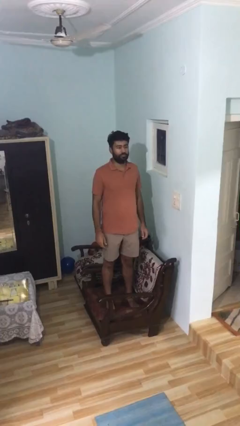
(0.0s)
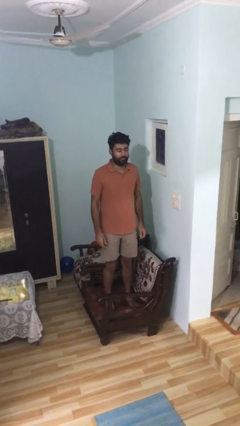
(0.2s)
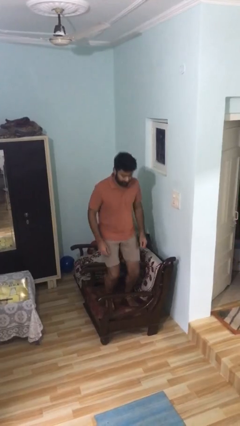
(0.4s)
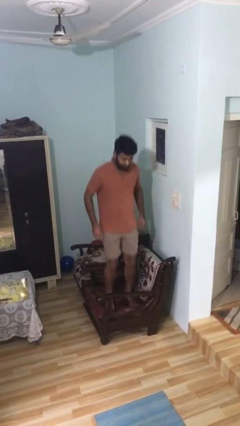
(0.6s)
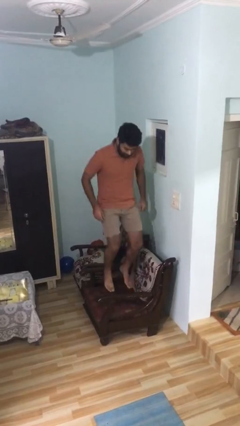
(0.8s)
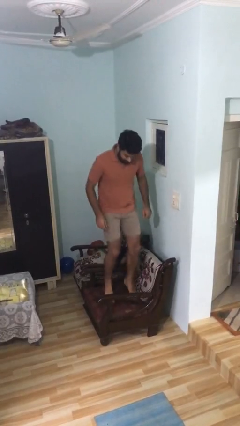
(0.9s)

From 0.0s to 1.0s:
person jumps on couch

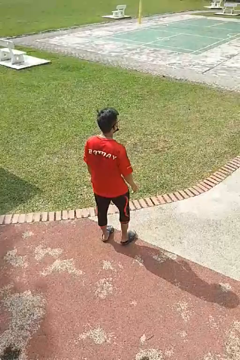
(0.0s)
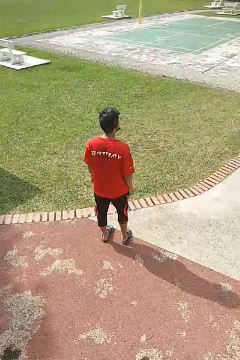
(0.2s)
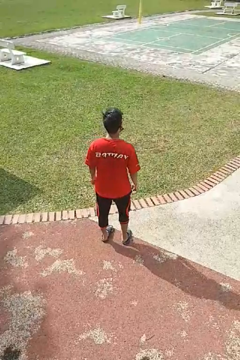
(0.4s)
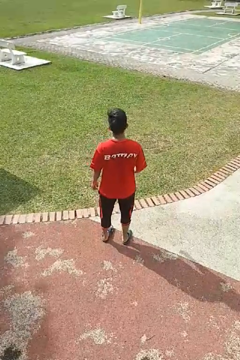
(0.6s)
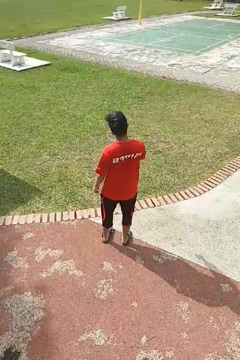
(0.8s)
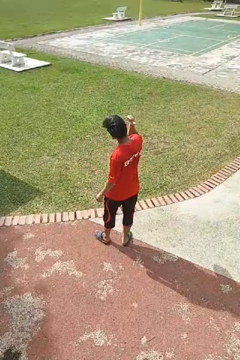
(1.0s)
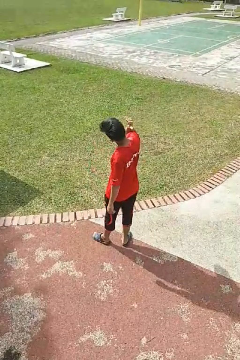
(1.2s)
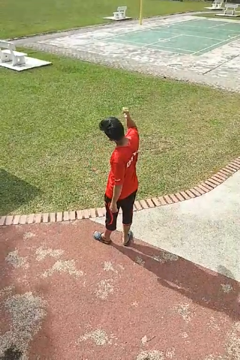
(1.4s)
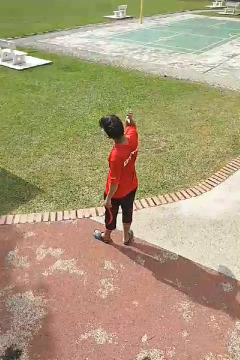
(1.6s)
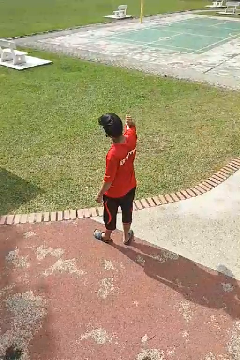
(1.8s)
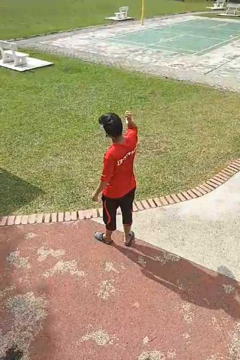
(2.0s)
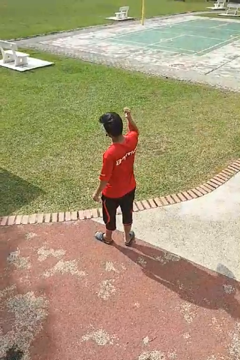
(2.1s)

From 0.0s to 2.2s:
person gestures behind me

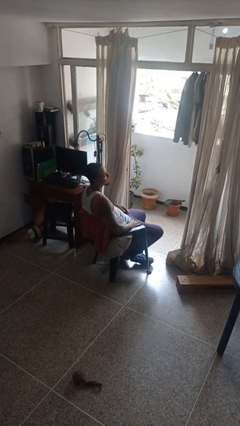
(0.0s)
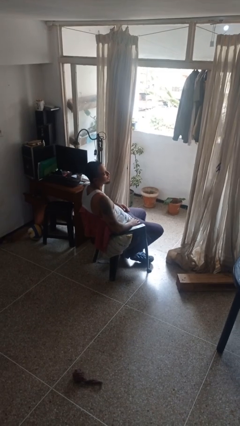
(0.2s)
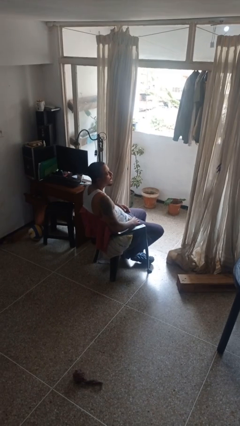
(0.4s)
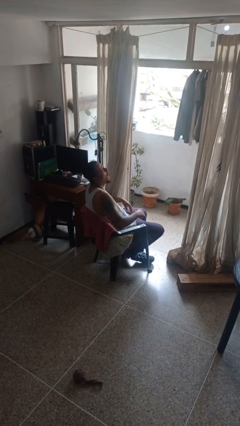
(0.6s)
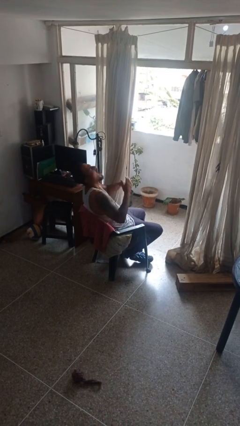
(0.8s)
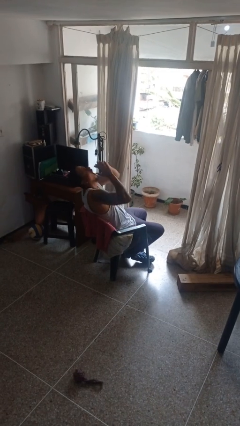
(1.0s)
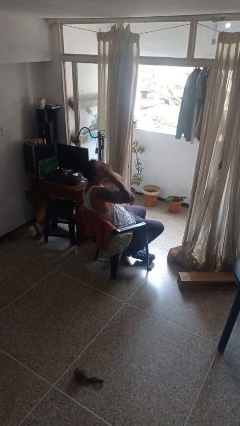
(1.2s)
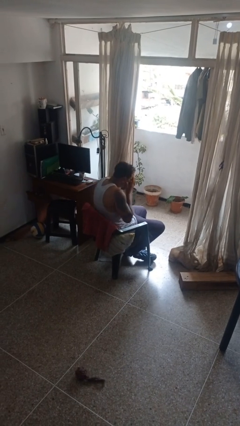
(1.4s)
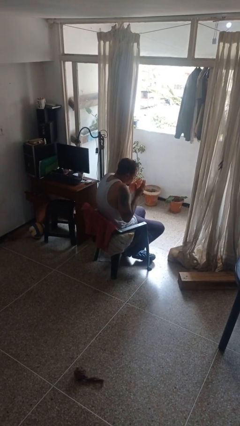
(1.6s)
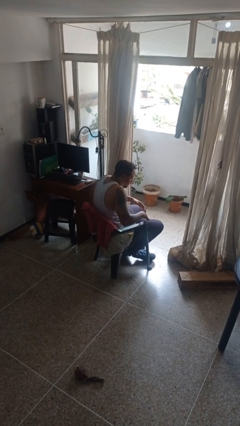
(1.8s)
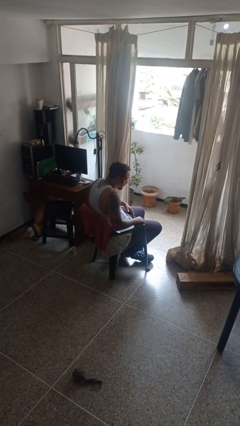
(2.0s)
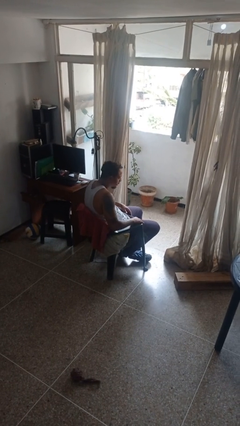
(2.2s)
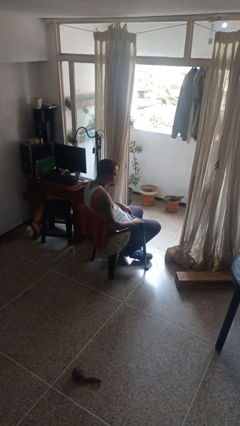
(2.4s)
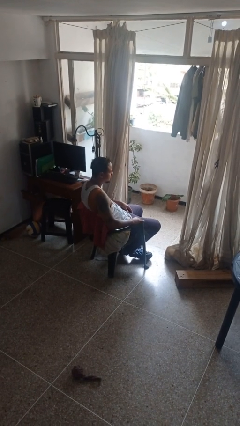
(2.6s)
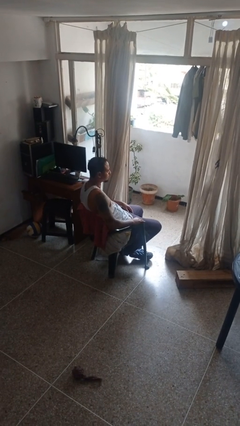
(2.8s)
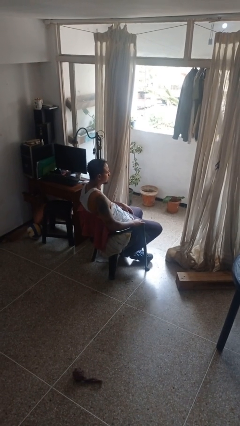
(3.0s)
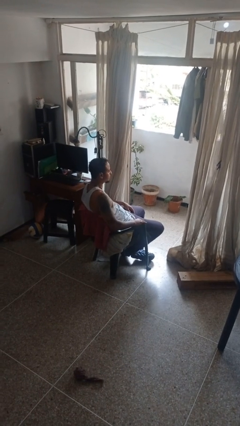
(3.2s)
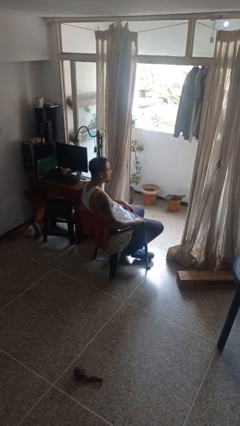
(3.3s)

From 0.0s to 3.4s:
person sneezes into hand

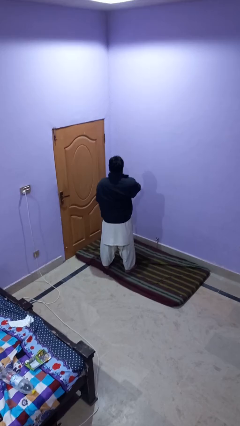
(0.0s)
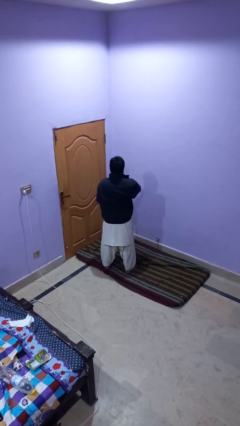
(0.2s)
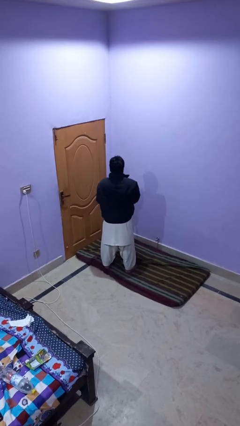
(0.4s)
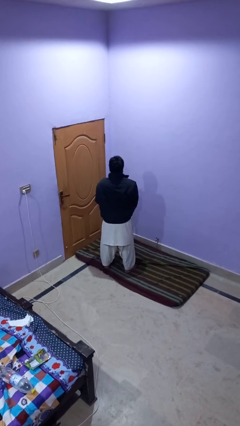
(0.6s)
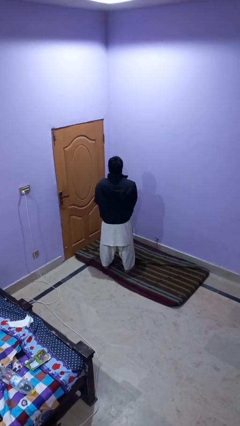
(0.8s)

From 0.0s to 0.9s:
person unzips jacket

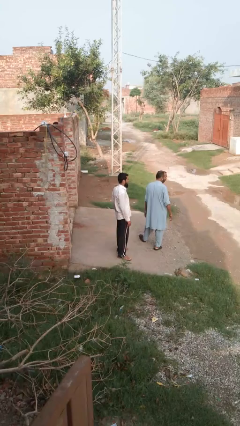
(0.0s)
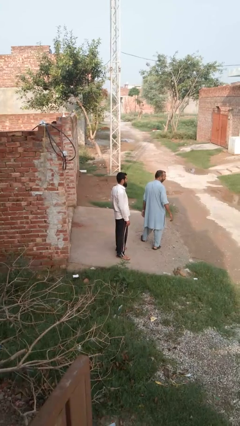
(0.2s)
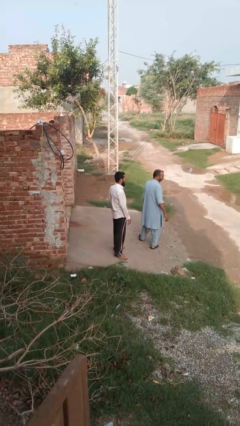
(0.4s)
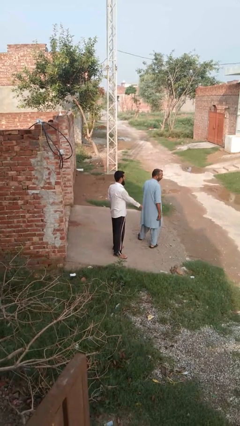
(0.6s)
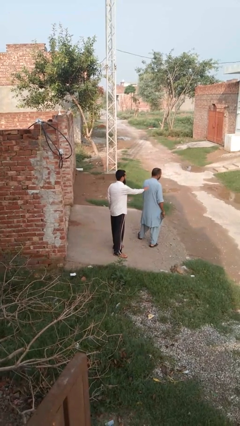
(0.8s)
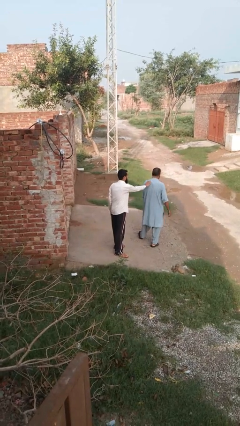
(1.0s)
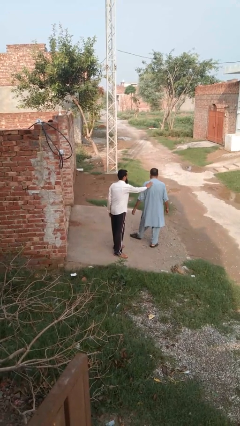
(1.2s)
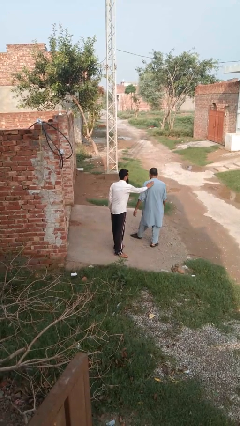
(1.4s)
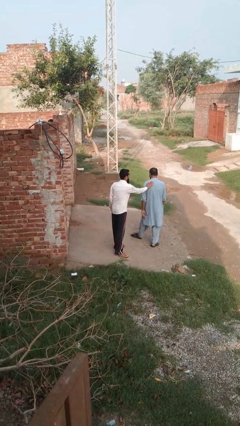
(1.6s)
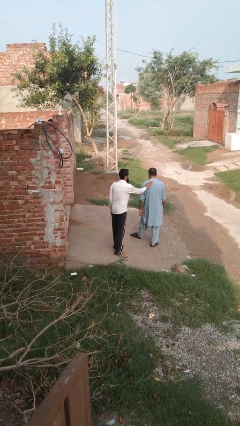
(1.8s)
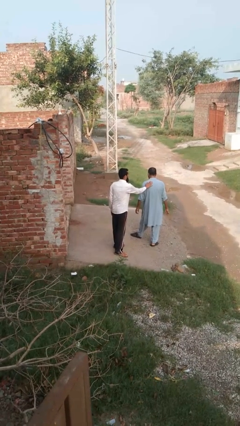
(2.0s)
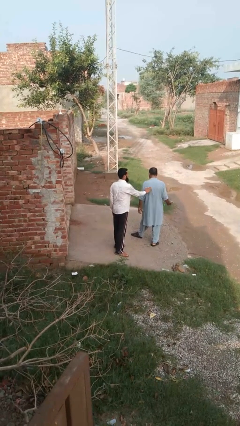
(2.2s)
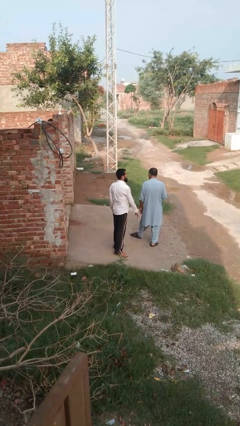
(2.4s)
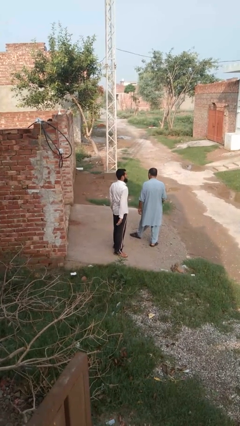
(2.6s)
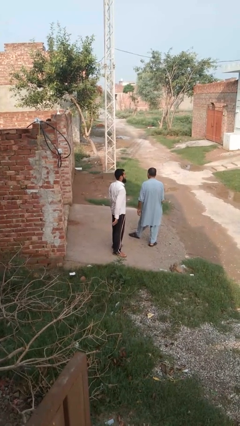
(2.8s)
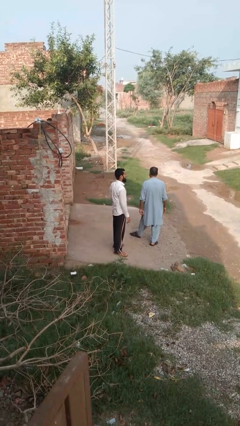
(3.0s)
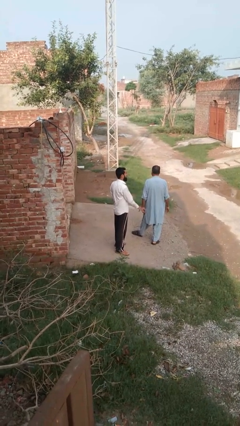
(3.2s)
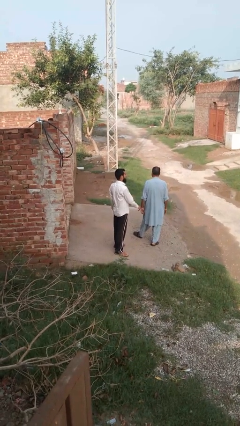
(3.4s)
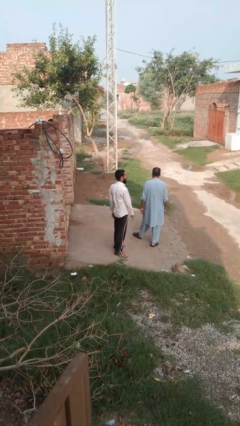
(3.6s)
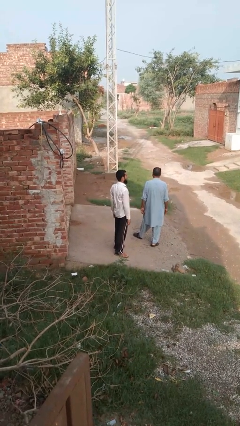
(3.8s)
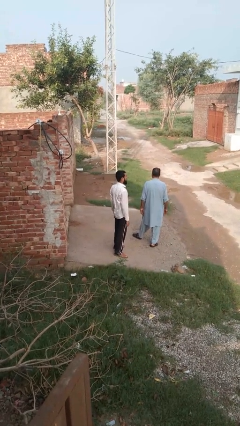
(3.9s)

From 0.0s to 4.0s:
person touches back of person

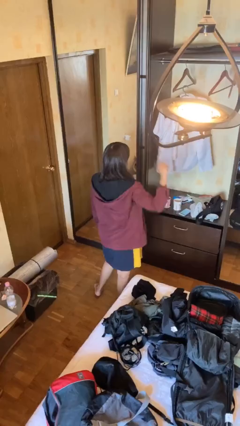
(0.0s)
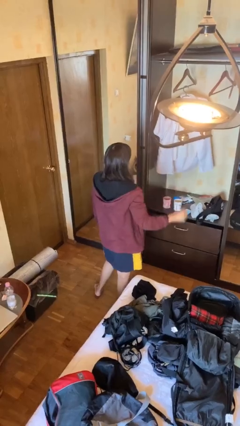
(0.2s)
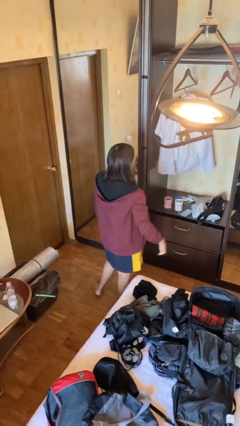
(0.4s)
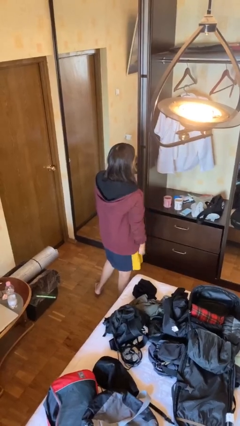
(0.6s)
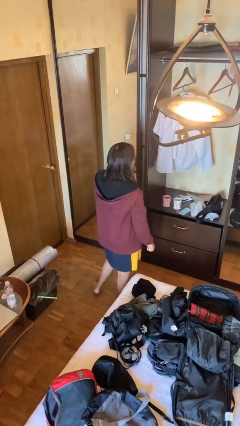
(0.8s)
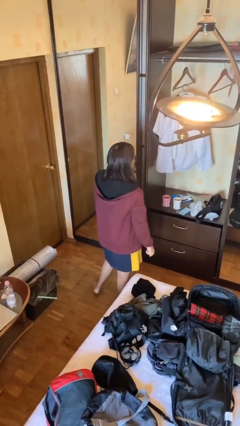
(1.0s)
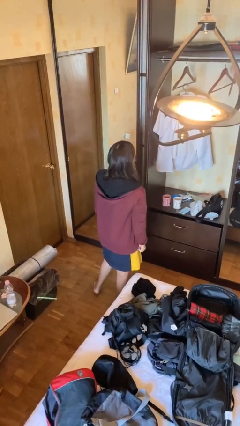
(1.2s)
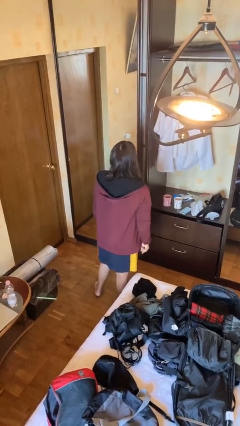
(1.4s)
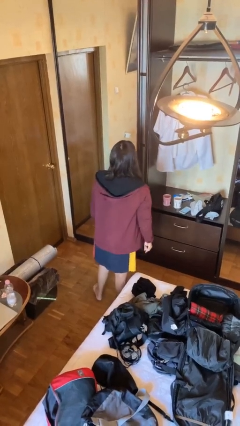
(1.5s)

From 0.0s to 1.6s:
person gestures lower hand

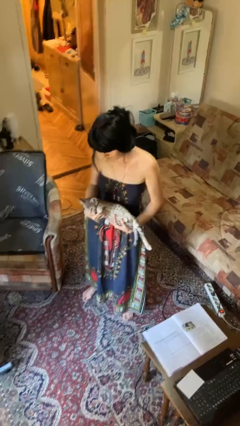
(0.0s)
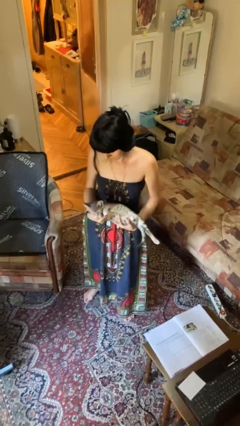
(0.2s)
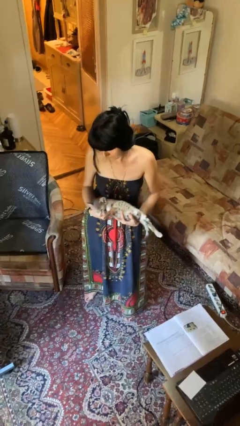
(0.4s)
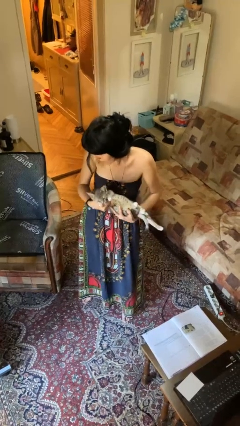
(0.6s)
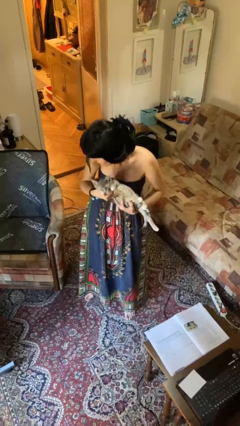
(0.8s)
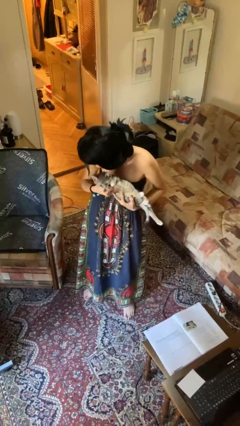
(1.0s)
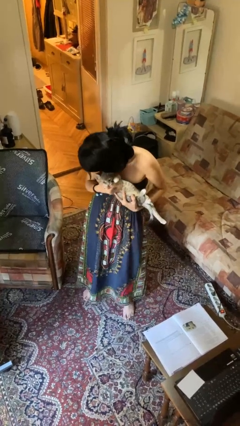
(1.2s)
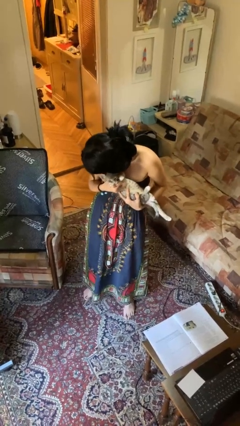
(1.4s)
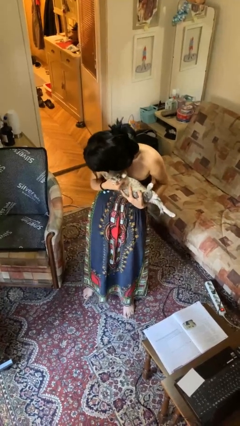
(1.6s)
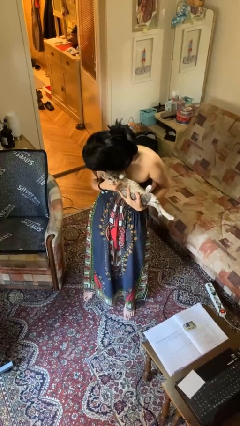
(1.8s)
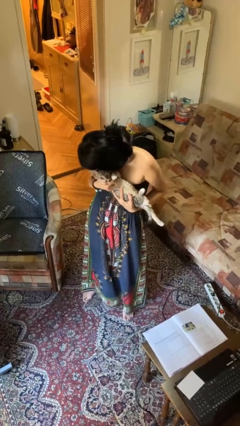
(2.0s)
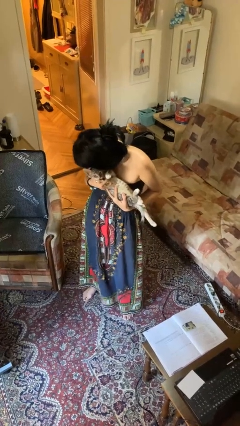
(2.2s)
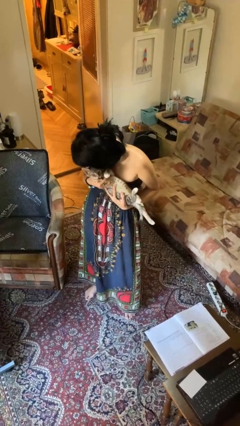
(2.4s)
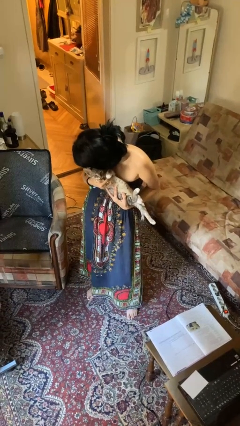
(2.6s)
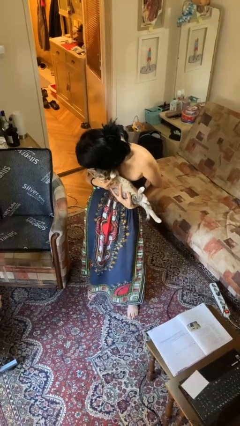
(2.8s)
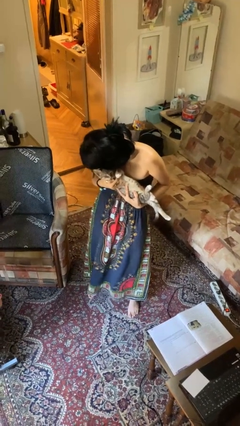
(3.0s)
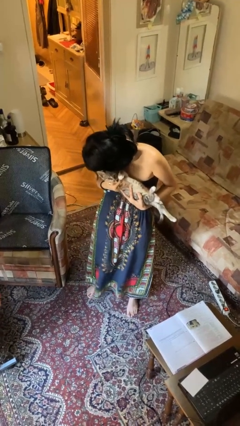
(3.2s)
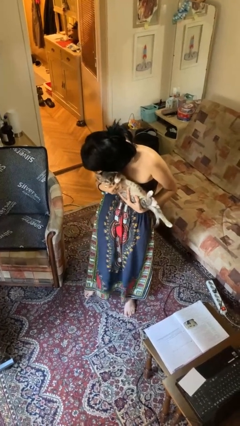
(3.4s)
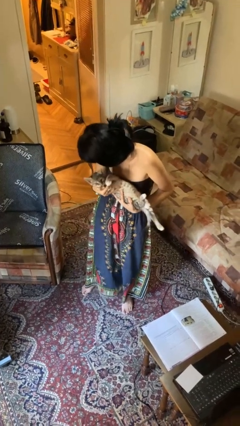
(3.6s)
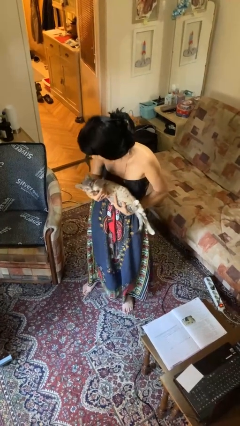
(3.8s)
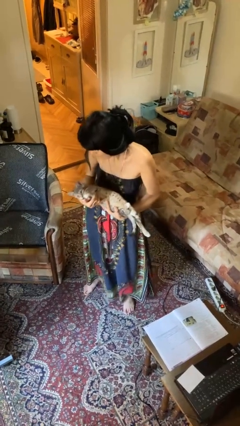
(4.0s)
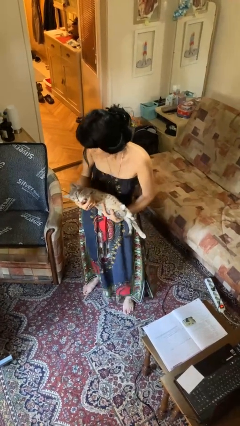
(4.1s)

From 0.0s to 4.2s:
person hugs cat

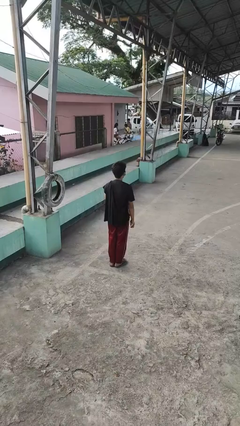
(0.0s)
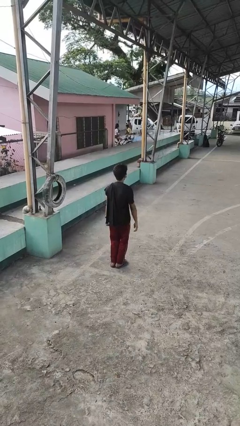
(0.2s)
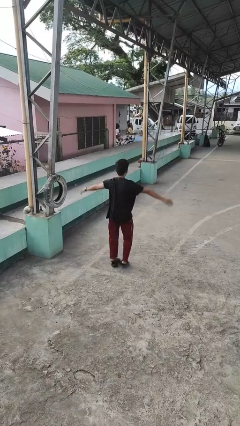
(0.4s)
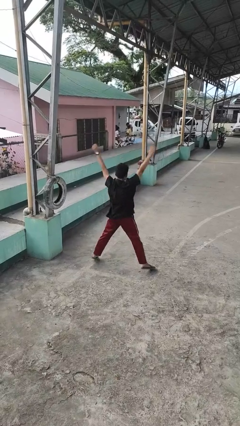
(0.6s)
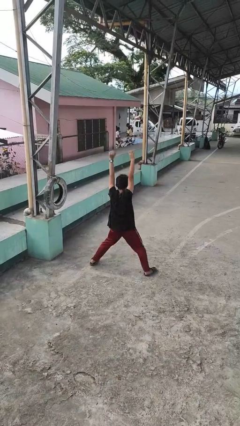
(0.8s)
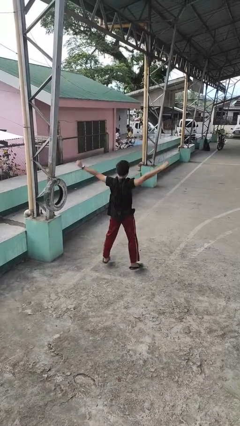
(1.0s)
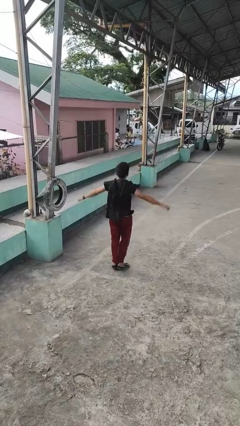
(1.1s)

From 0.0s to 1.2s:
person exercises with jumping jacks
